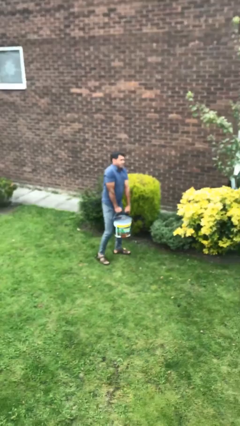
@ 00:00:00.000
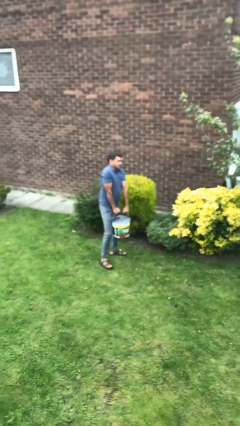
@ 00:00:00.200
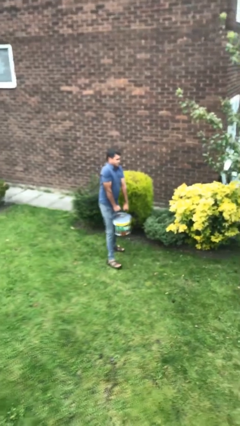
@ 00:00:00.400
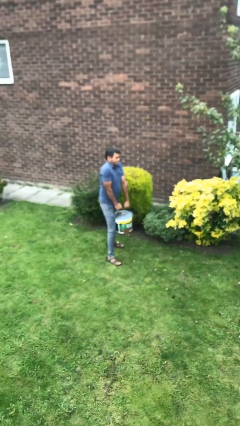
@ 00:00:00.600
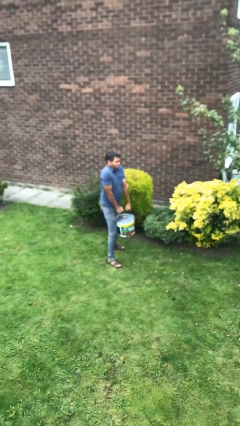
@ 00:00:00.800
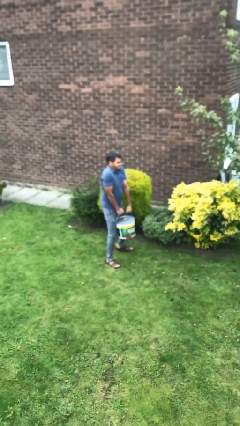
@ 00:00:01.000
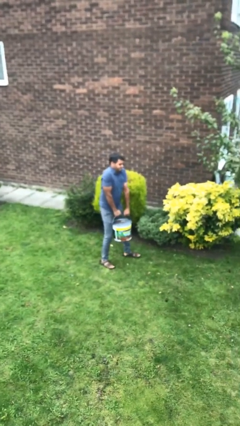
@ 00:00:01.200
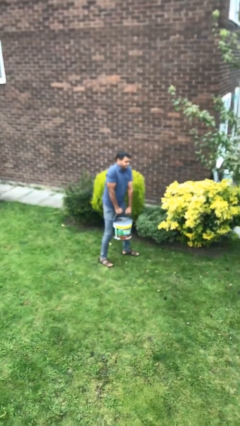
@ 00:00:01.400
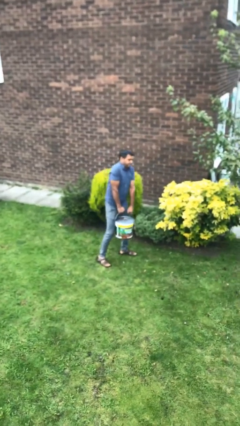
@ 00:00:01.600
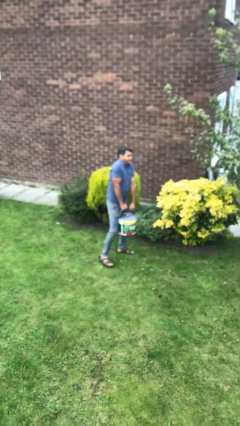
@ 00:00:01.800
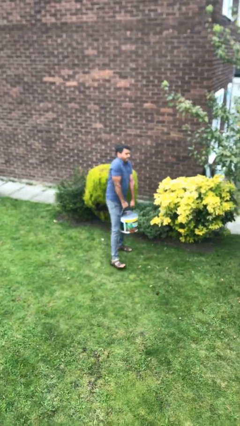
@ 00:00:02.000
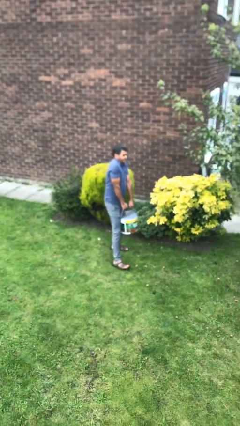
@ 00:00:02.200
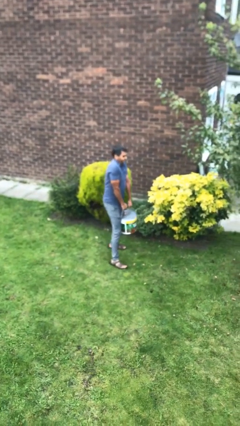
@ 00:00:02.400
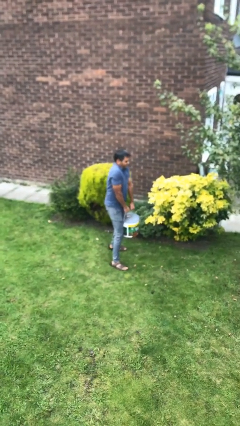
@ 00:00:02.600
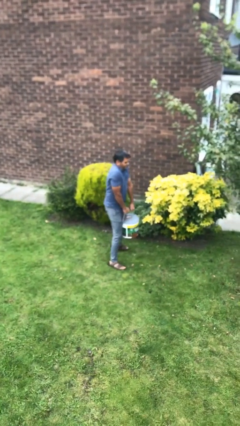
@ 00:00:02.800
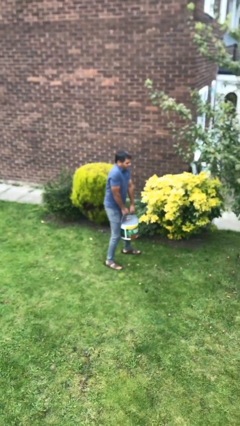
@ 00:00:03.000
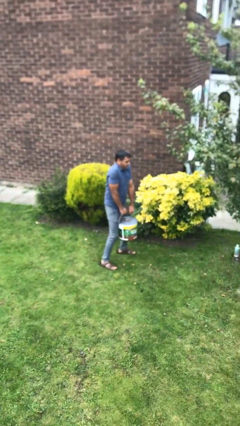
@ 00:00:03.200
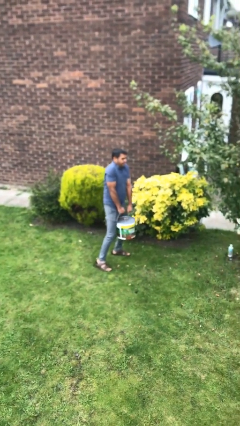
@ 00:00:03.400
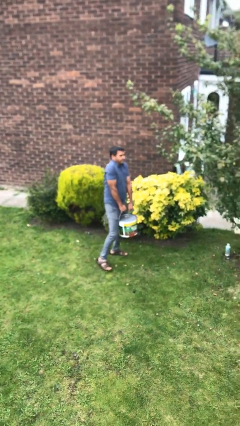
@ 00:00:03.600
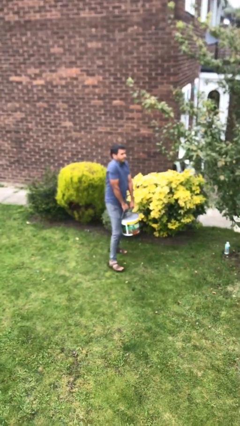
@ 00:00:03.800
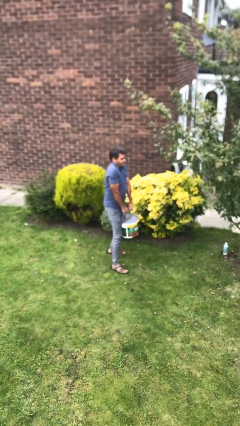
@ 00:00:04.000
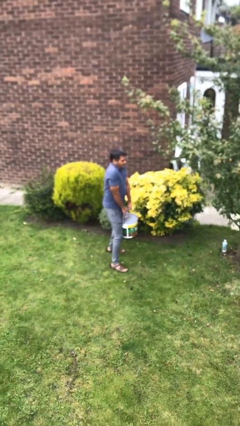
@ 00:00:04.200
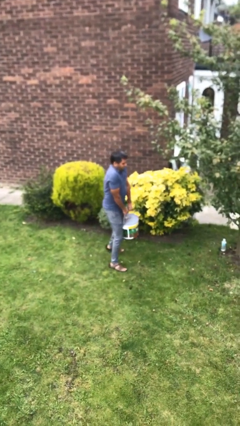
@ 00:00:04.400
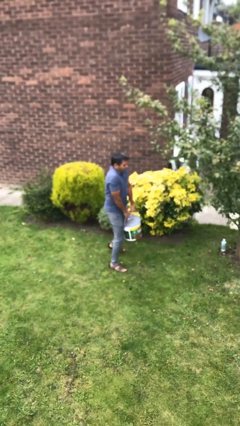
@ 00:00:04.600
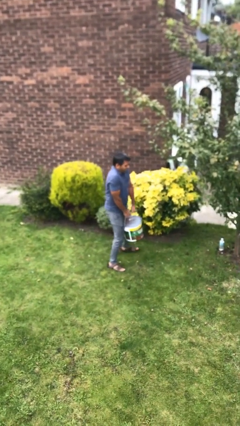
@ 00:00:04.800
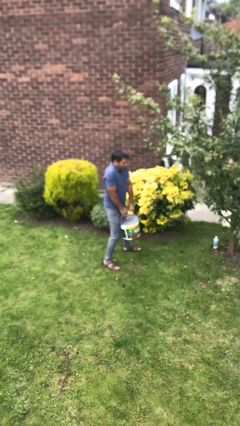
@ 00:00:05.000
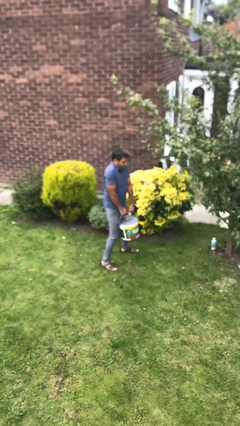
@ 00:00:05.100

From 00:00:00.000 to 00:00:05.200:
person carries heavy object

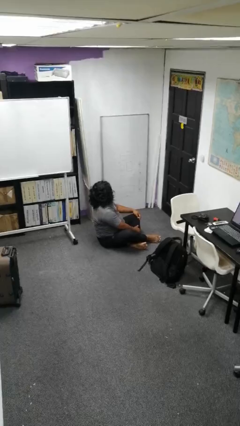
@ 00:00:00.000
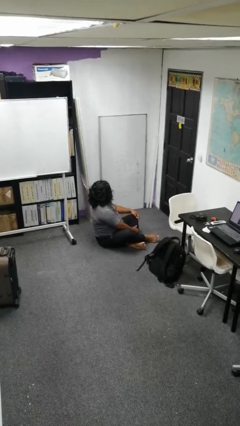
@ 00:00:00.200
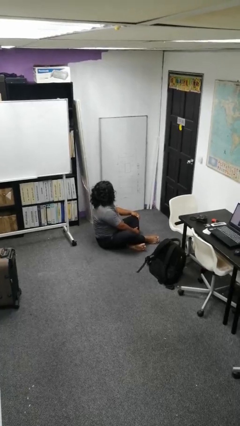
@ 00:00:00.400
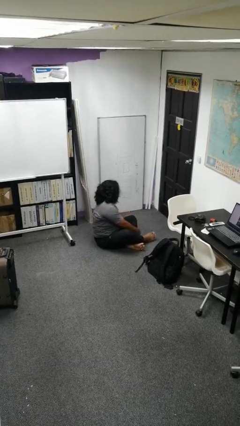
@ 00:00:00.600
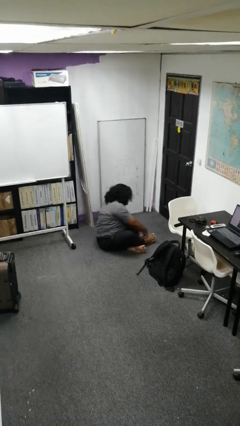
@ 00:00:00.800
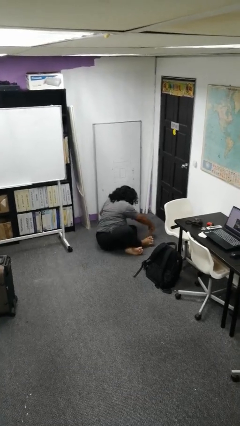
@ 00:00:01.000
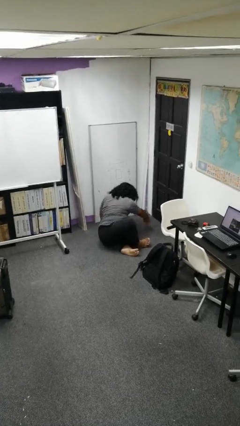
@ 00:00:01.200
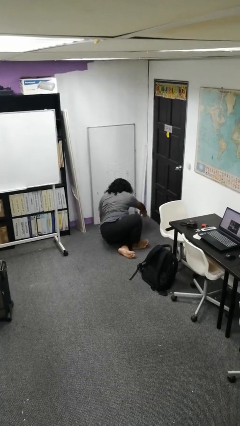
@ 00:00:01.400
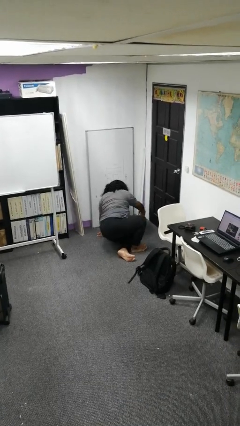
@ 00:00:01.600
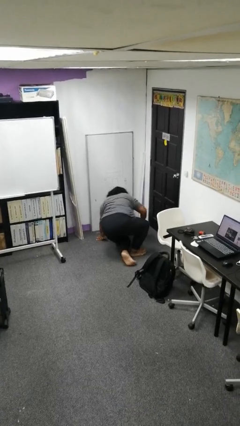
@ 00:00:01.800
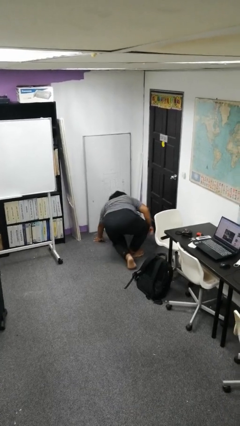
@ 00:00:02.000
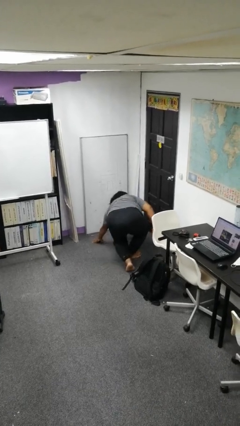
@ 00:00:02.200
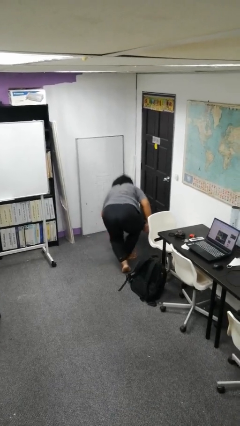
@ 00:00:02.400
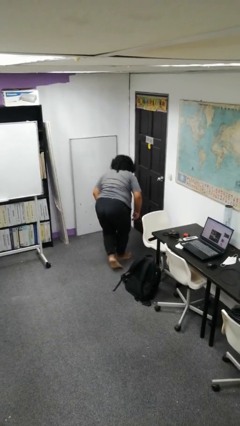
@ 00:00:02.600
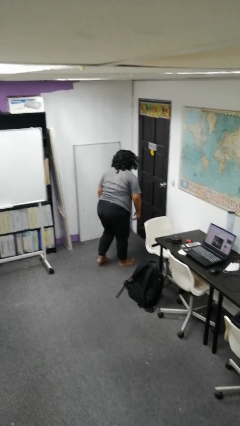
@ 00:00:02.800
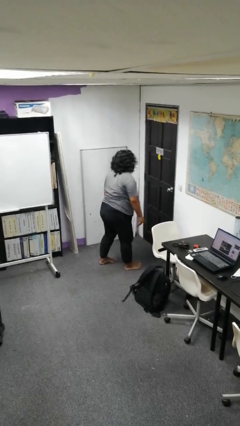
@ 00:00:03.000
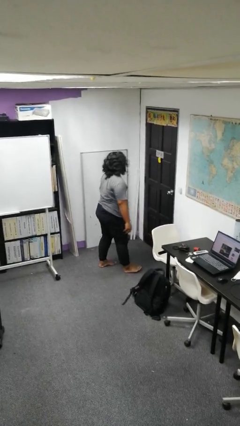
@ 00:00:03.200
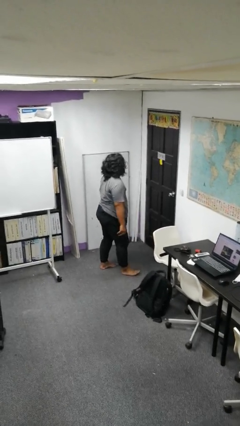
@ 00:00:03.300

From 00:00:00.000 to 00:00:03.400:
person stands up from floor

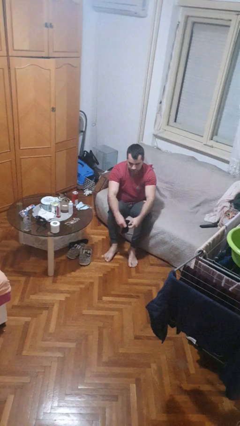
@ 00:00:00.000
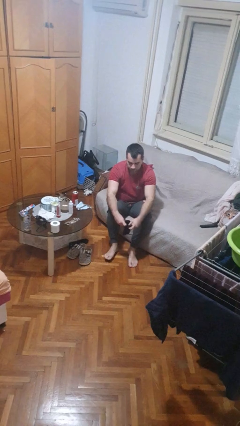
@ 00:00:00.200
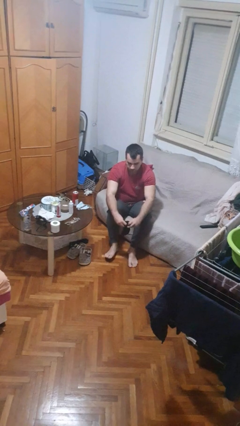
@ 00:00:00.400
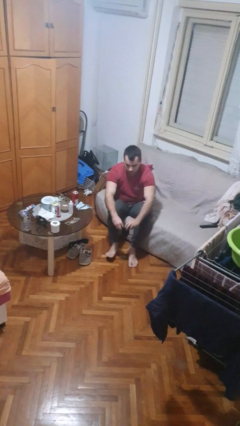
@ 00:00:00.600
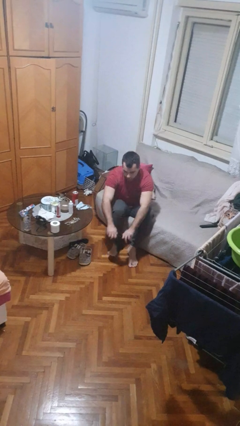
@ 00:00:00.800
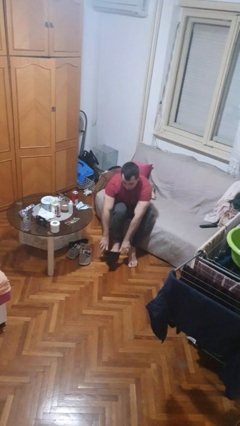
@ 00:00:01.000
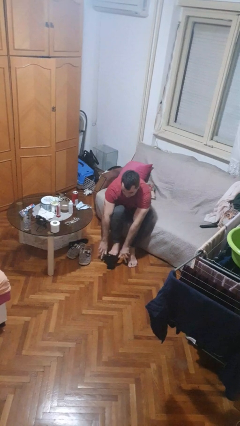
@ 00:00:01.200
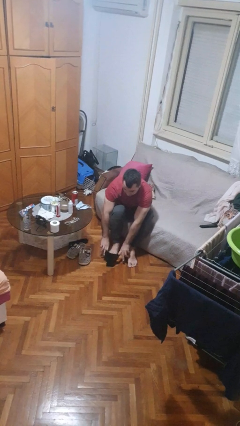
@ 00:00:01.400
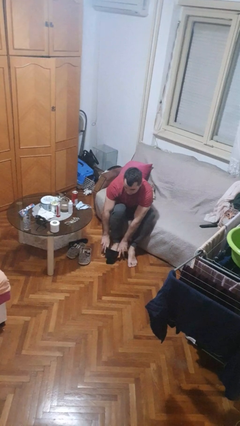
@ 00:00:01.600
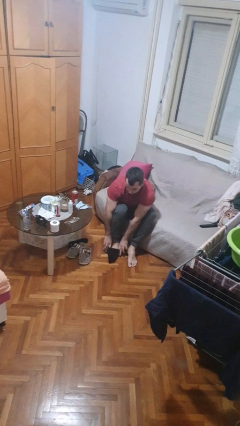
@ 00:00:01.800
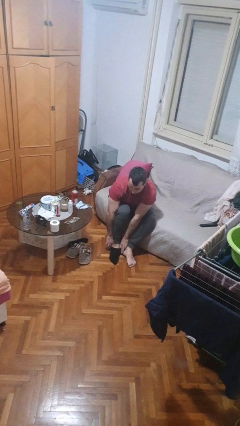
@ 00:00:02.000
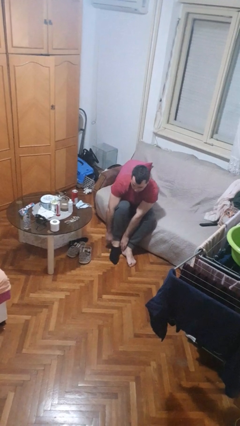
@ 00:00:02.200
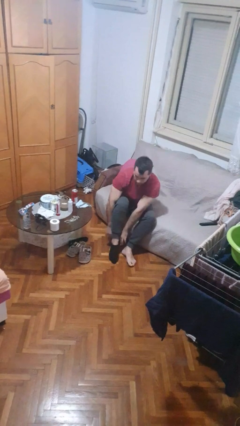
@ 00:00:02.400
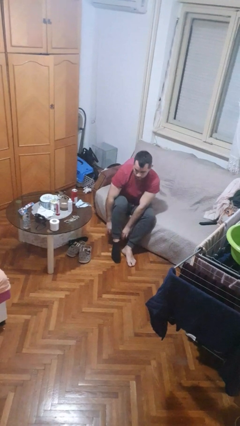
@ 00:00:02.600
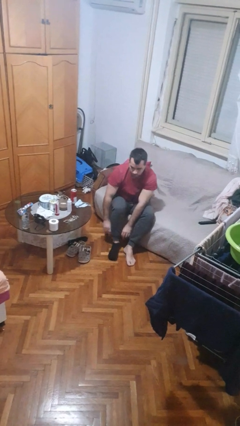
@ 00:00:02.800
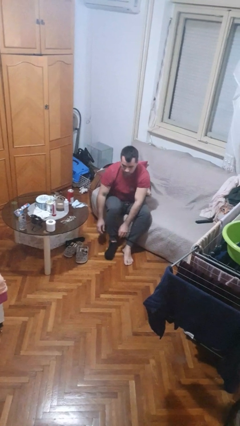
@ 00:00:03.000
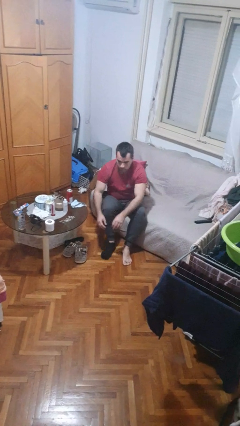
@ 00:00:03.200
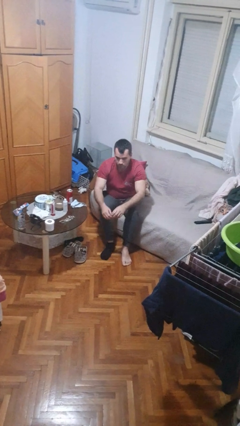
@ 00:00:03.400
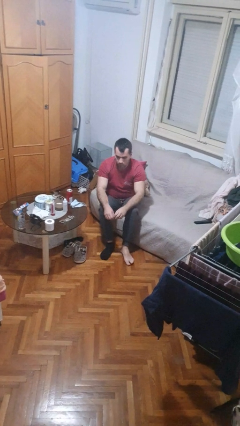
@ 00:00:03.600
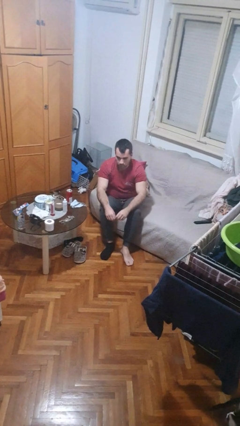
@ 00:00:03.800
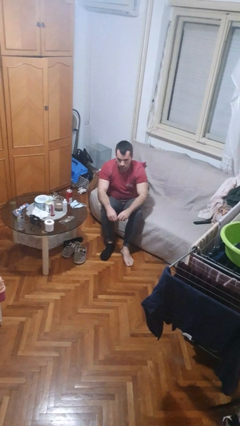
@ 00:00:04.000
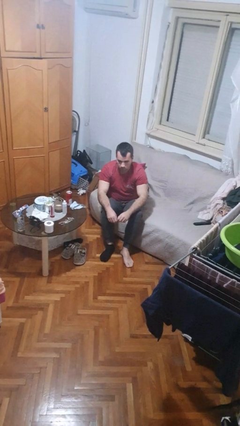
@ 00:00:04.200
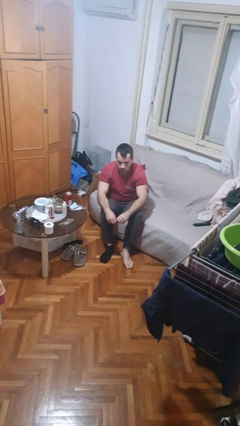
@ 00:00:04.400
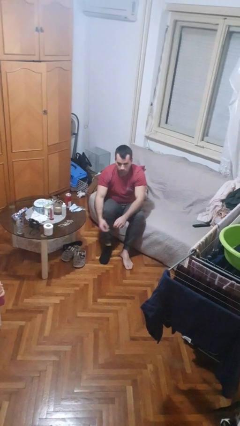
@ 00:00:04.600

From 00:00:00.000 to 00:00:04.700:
person puts on socks

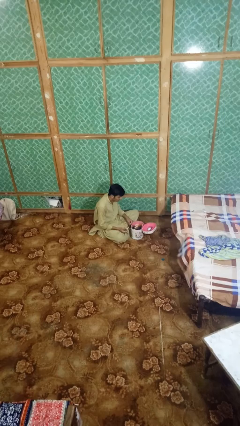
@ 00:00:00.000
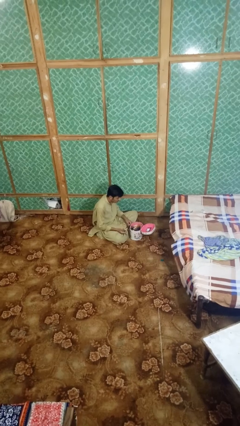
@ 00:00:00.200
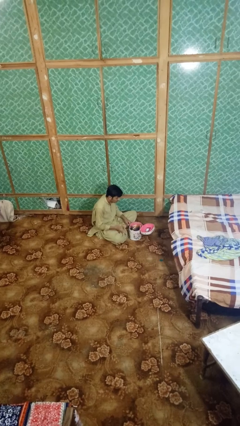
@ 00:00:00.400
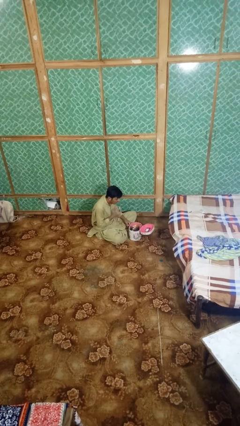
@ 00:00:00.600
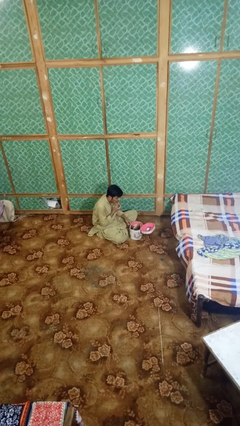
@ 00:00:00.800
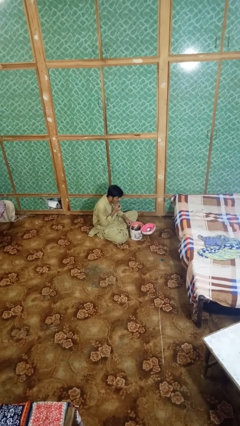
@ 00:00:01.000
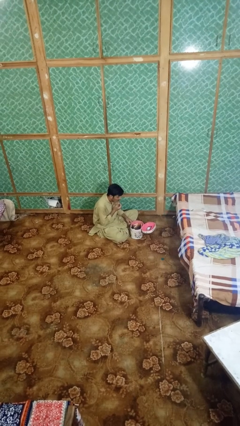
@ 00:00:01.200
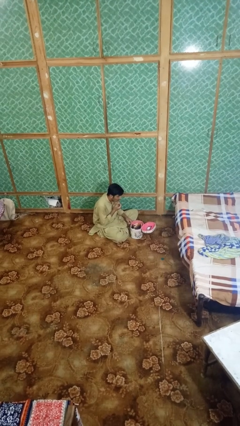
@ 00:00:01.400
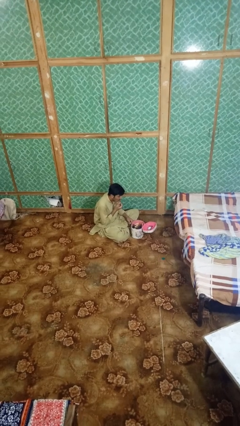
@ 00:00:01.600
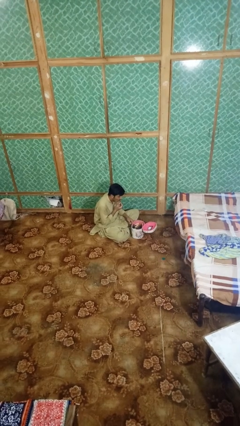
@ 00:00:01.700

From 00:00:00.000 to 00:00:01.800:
person applies lip makeup

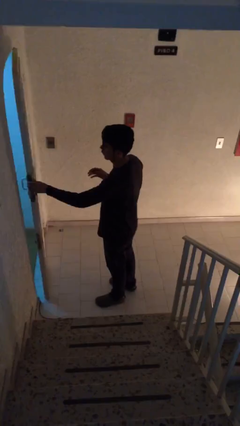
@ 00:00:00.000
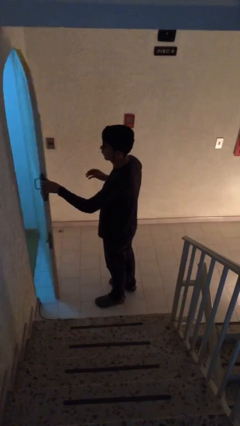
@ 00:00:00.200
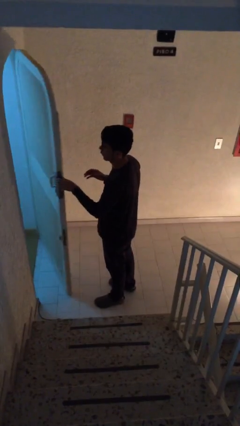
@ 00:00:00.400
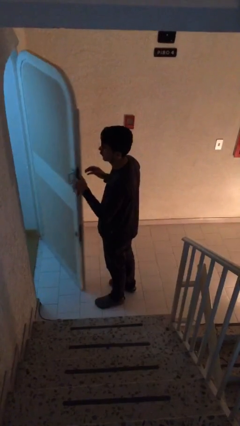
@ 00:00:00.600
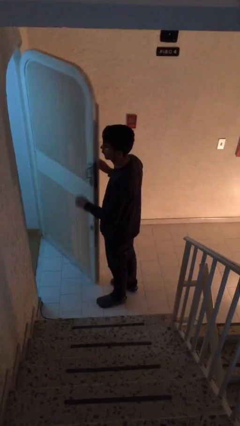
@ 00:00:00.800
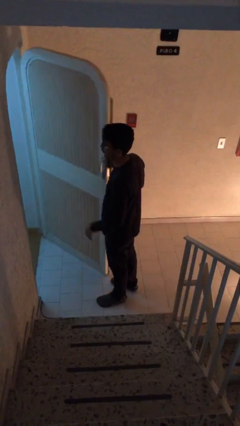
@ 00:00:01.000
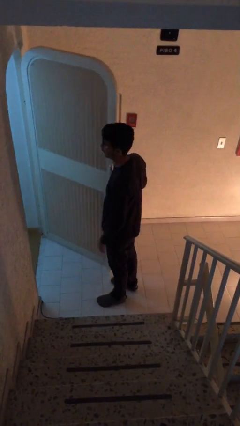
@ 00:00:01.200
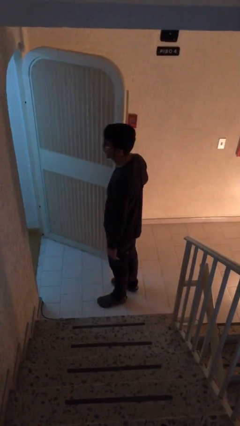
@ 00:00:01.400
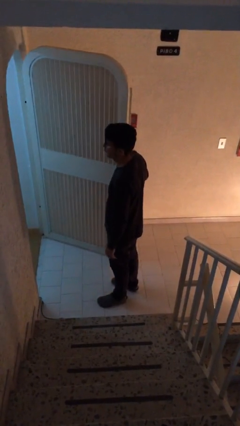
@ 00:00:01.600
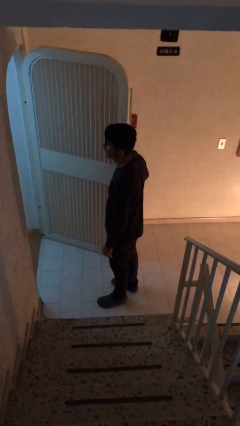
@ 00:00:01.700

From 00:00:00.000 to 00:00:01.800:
person opens facility door

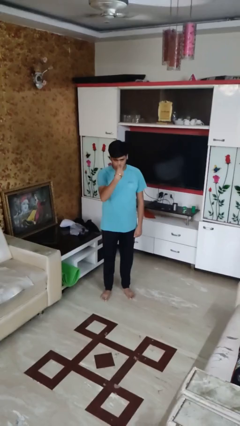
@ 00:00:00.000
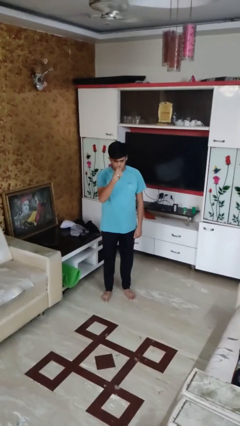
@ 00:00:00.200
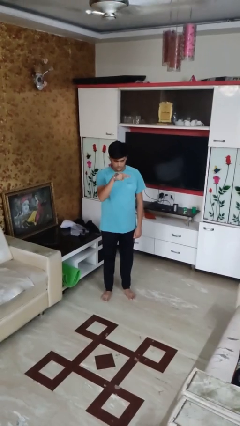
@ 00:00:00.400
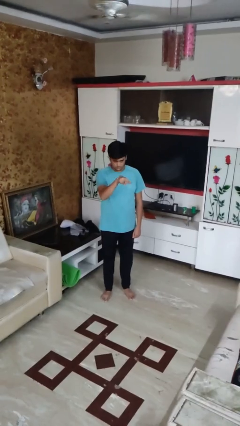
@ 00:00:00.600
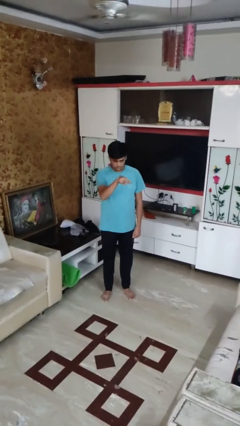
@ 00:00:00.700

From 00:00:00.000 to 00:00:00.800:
person gestures watch closely
